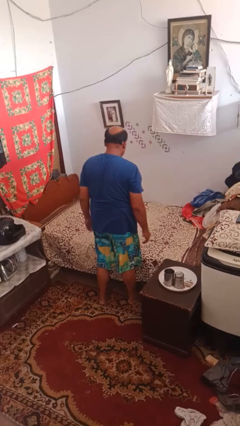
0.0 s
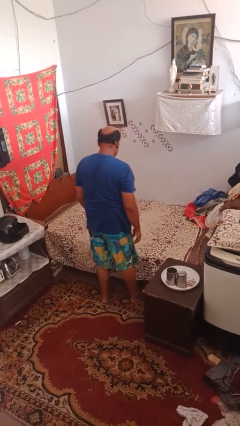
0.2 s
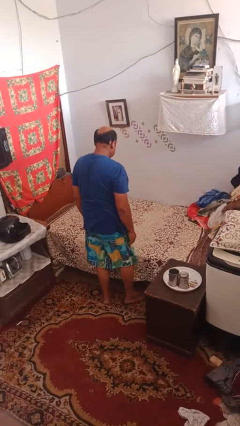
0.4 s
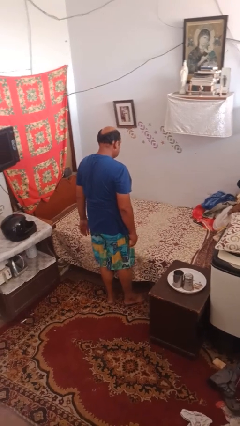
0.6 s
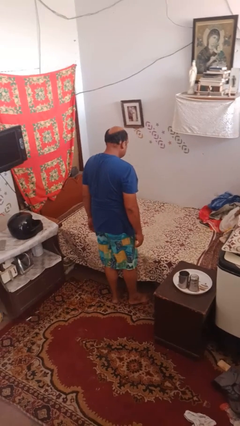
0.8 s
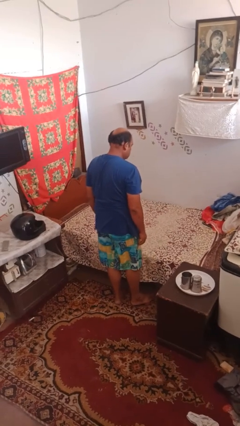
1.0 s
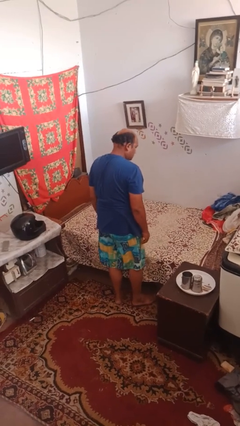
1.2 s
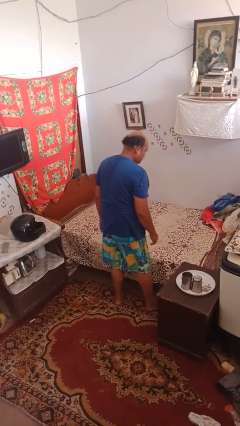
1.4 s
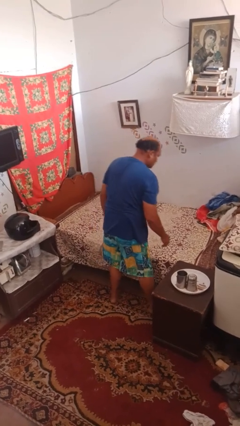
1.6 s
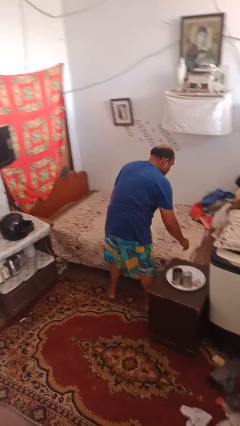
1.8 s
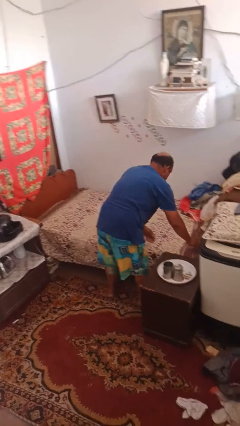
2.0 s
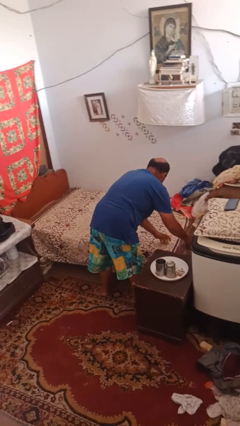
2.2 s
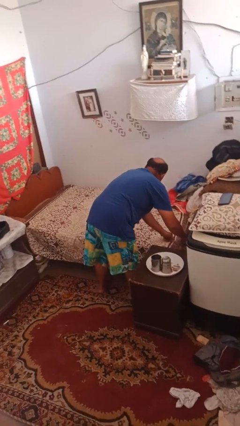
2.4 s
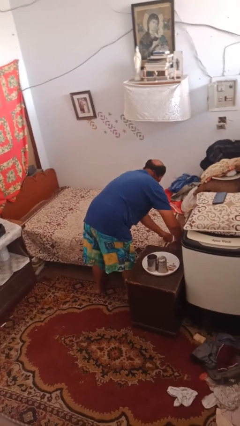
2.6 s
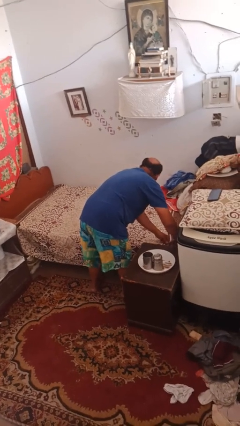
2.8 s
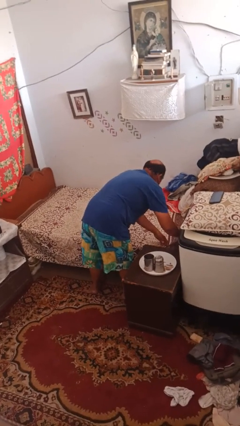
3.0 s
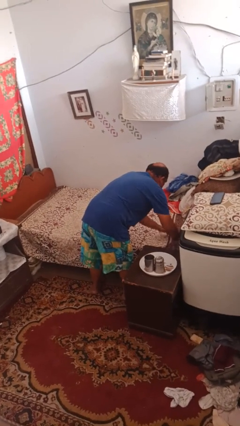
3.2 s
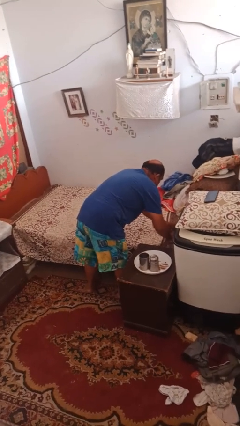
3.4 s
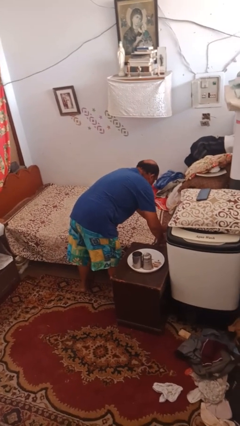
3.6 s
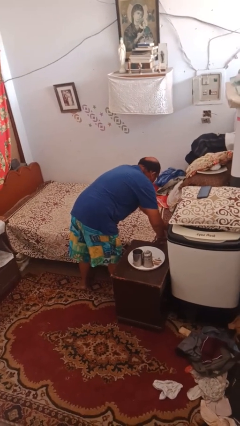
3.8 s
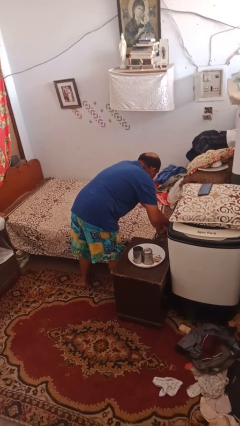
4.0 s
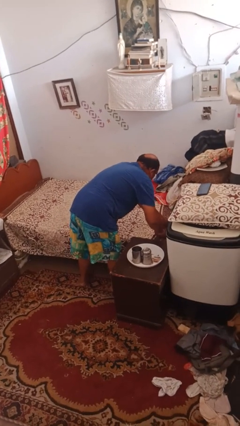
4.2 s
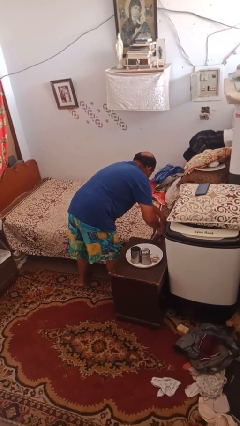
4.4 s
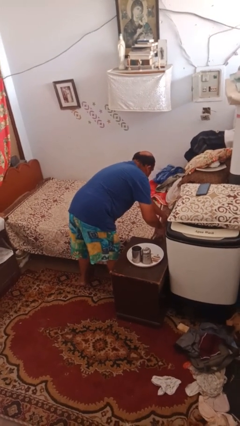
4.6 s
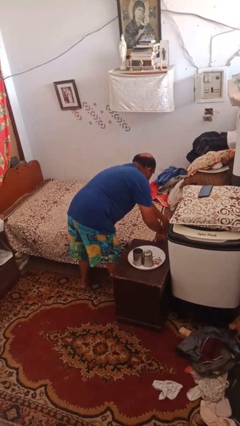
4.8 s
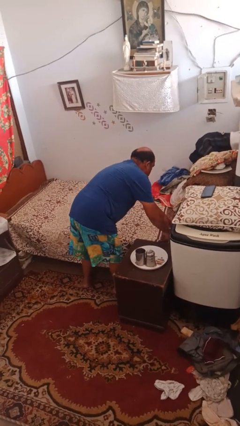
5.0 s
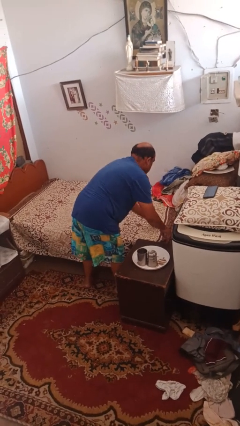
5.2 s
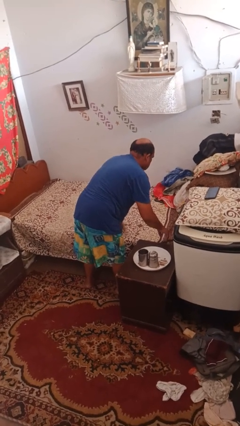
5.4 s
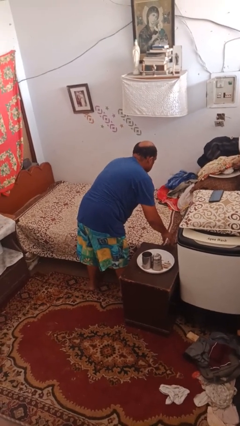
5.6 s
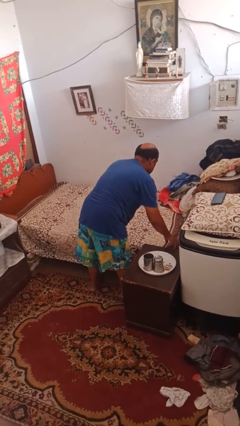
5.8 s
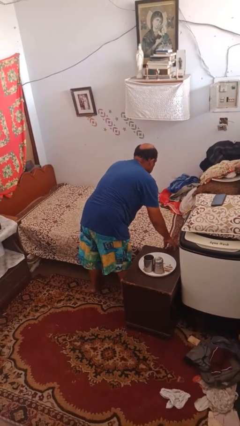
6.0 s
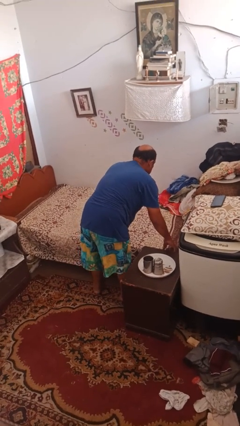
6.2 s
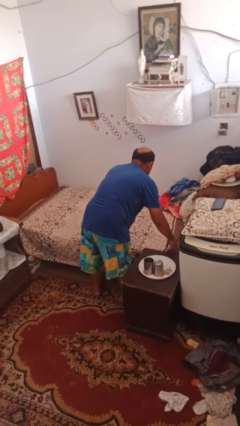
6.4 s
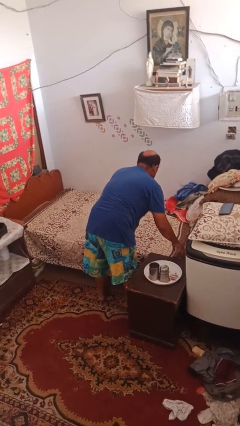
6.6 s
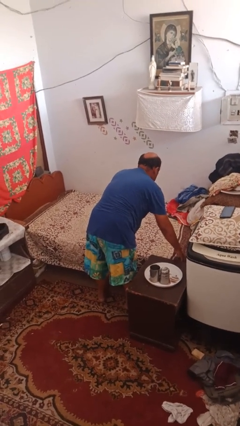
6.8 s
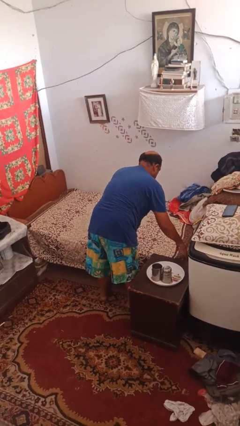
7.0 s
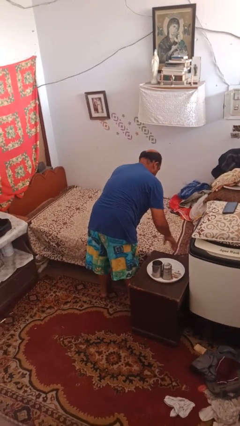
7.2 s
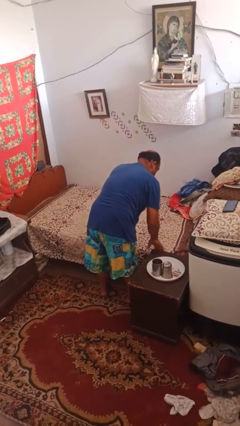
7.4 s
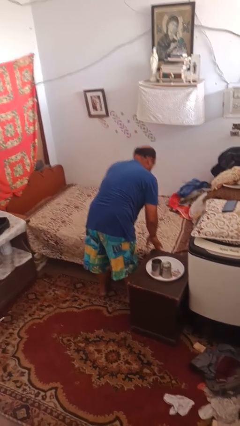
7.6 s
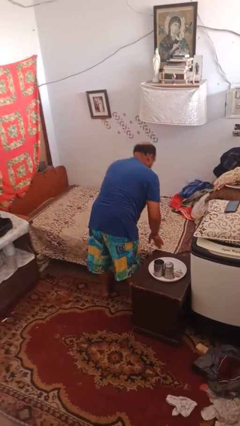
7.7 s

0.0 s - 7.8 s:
person makes bed

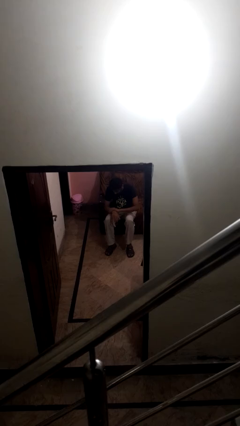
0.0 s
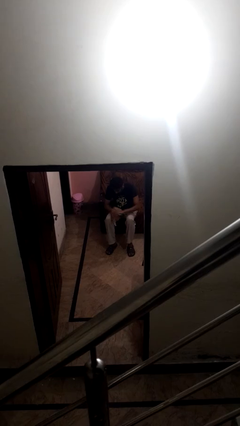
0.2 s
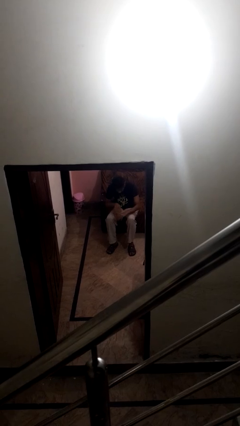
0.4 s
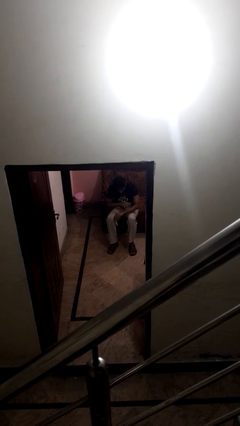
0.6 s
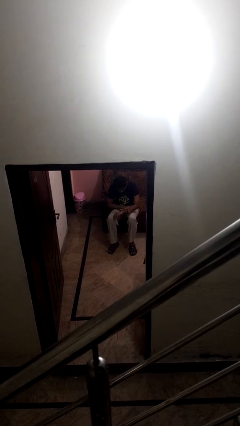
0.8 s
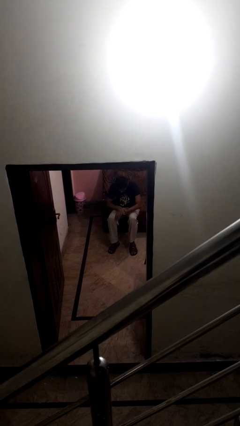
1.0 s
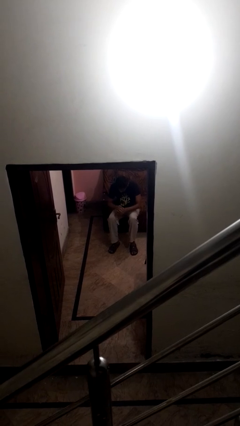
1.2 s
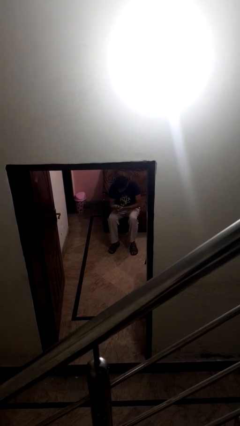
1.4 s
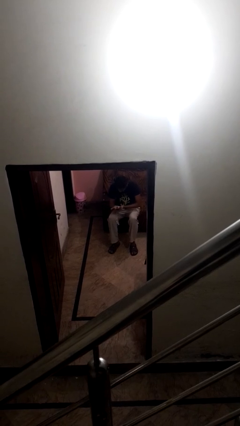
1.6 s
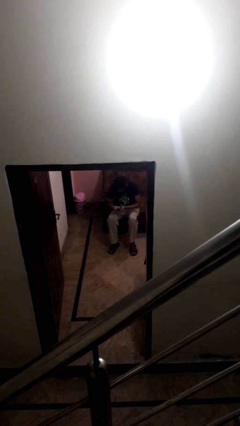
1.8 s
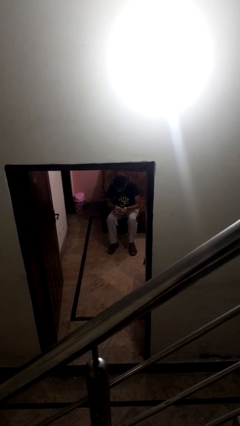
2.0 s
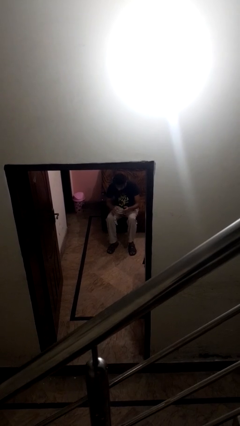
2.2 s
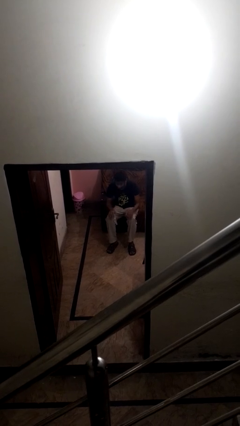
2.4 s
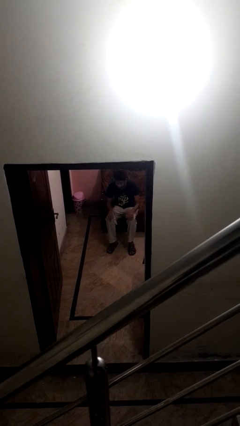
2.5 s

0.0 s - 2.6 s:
person looks at hands in lap

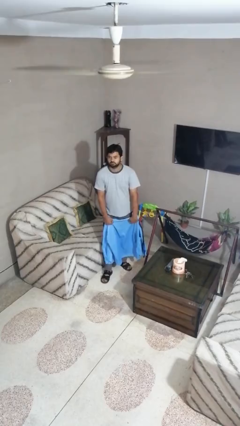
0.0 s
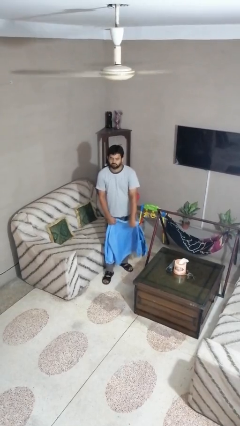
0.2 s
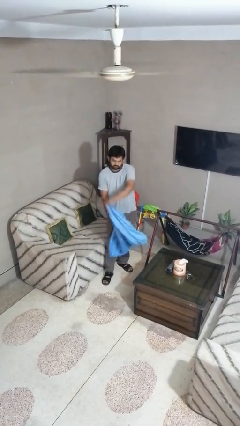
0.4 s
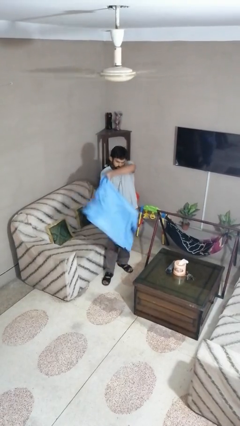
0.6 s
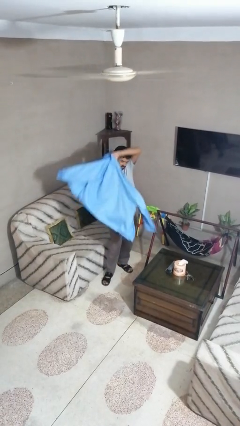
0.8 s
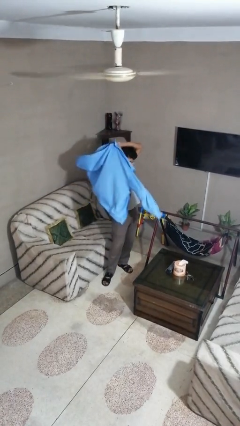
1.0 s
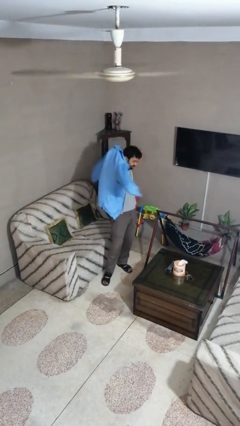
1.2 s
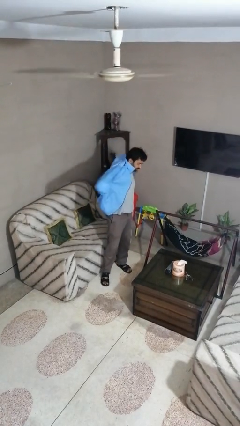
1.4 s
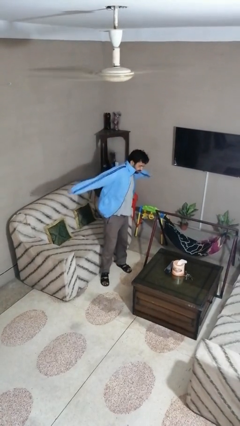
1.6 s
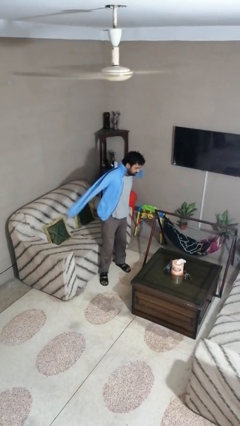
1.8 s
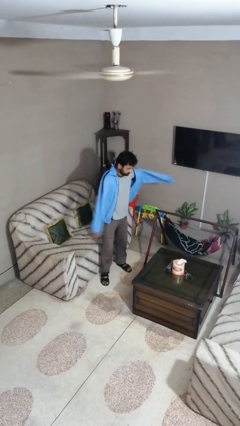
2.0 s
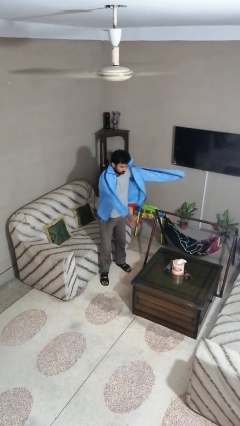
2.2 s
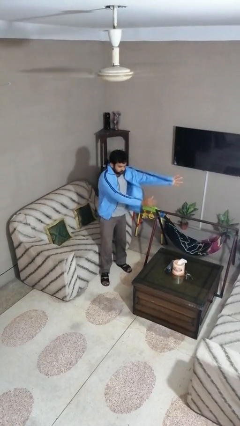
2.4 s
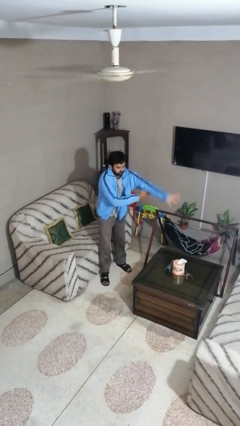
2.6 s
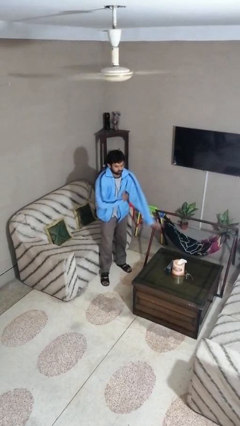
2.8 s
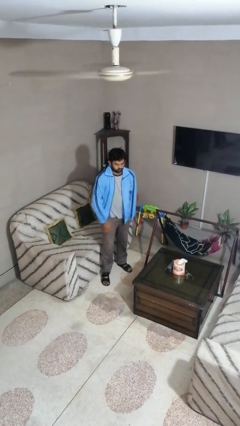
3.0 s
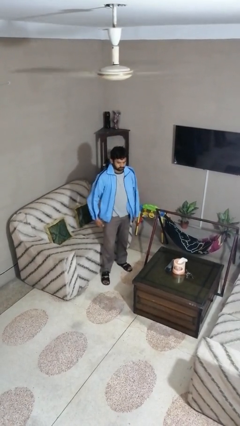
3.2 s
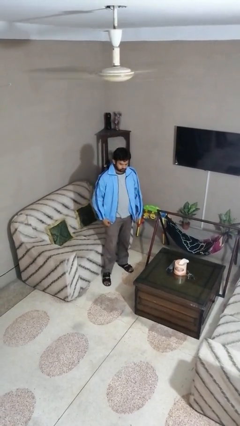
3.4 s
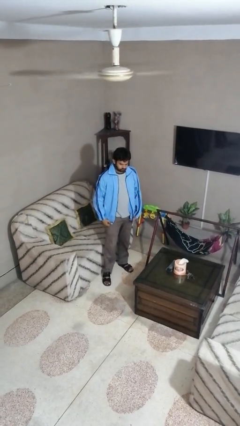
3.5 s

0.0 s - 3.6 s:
person puts on jacket

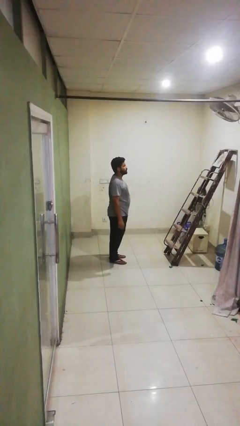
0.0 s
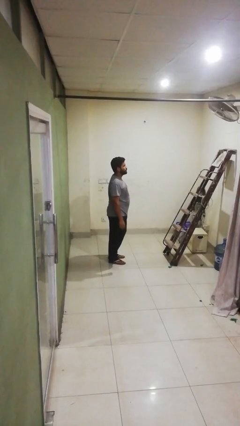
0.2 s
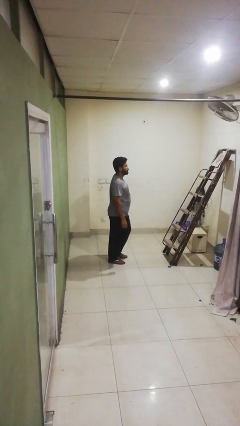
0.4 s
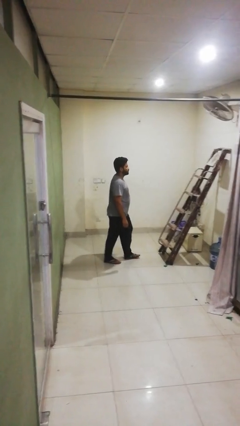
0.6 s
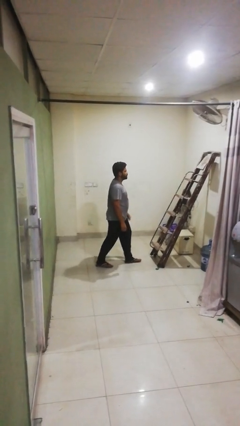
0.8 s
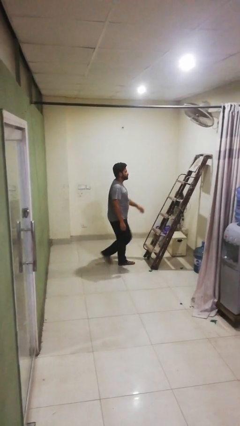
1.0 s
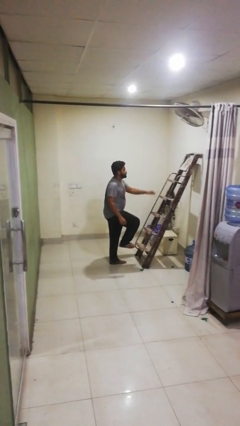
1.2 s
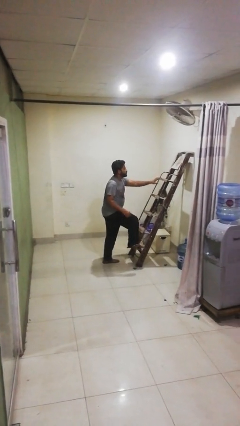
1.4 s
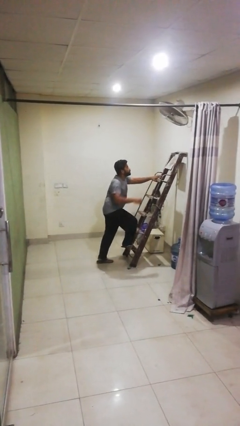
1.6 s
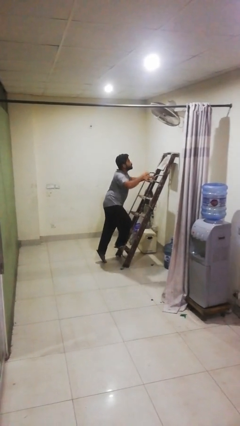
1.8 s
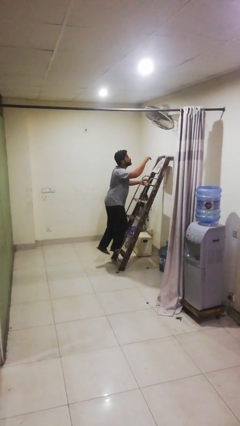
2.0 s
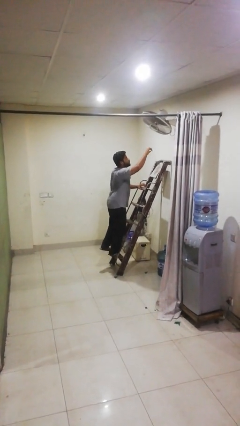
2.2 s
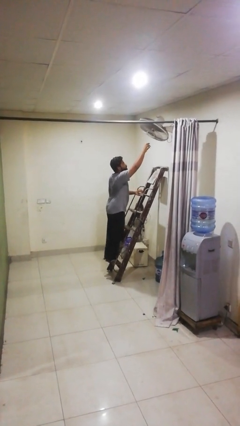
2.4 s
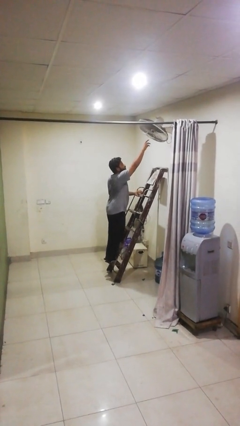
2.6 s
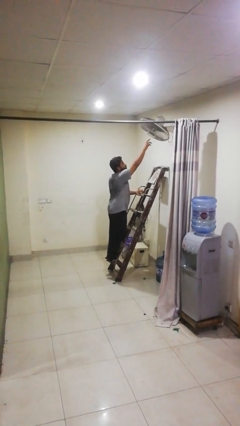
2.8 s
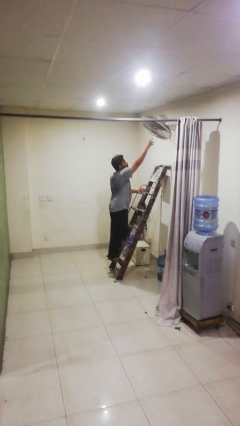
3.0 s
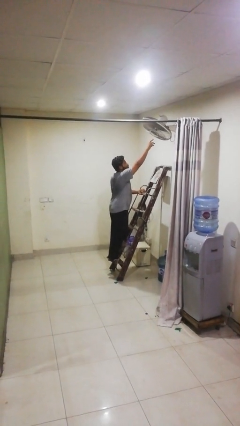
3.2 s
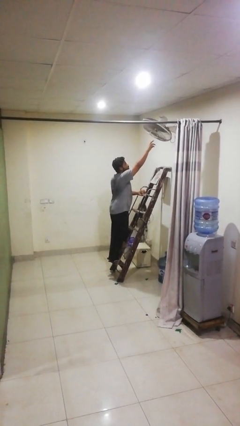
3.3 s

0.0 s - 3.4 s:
person climbs up ladder

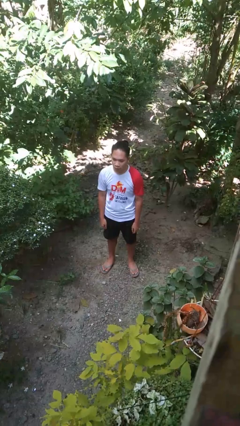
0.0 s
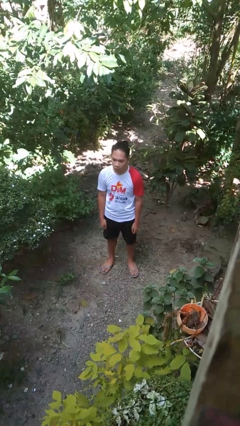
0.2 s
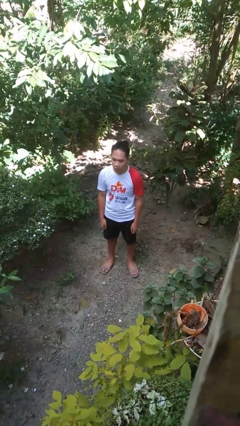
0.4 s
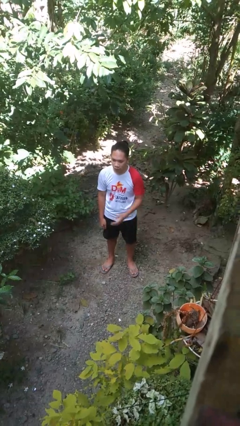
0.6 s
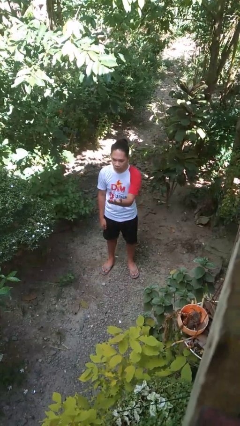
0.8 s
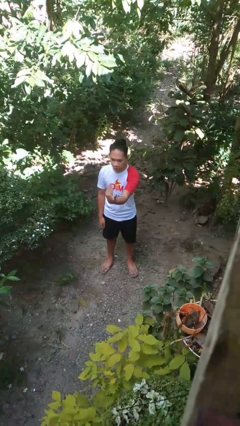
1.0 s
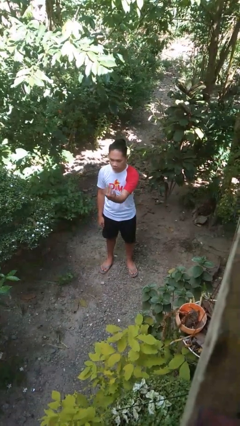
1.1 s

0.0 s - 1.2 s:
person gestures come here
